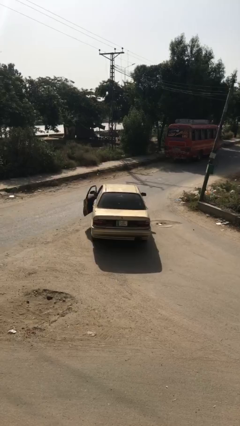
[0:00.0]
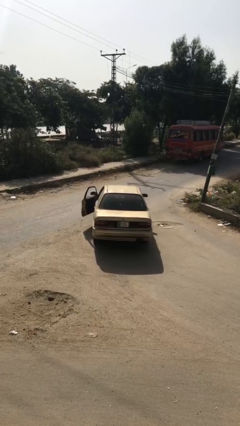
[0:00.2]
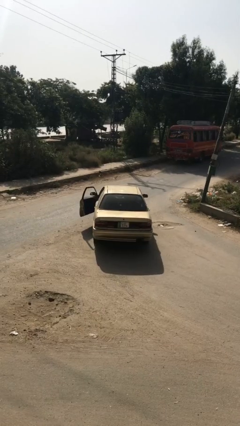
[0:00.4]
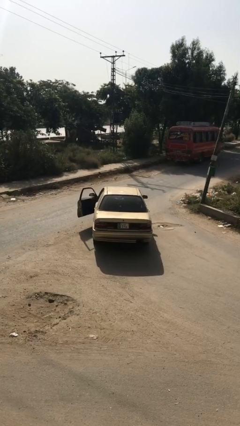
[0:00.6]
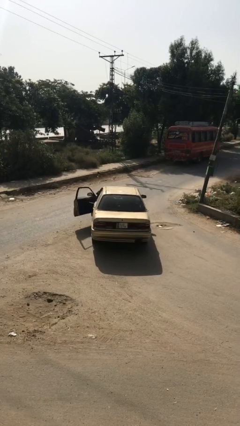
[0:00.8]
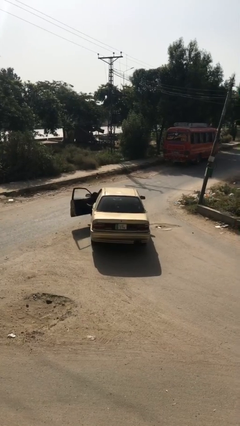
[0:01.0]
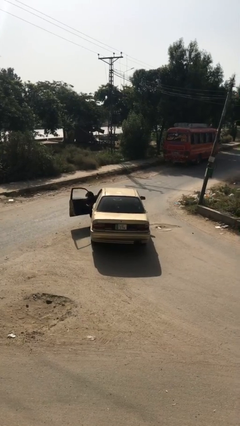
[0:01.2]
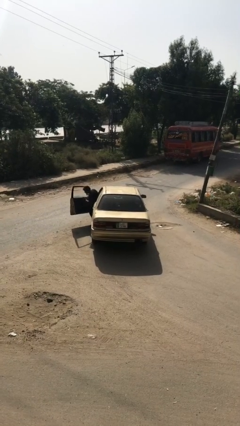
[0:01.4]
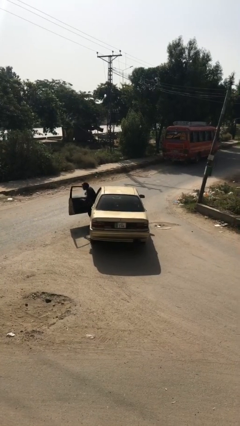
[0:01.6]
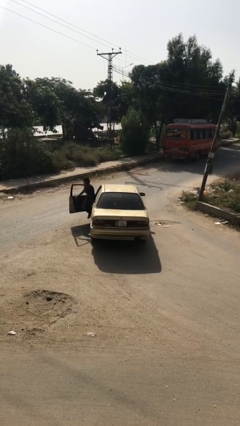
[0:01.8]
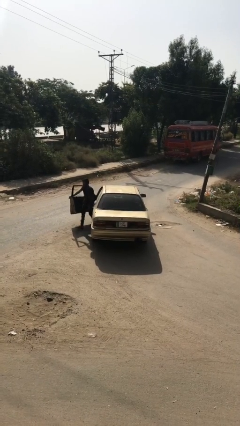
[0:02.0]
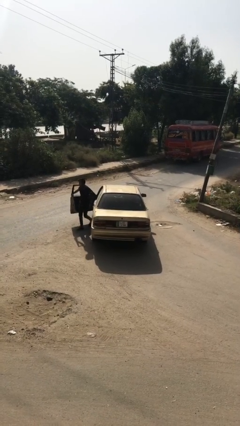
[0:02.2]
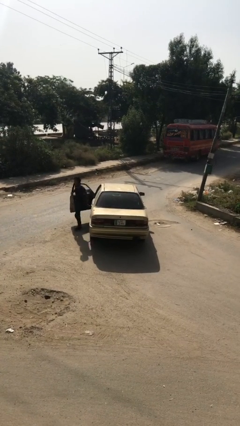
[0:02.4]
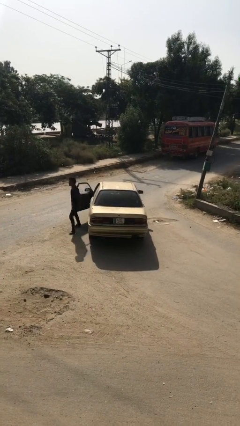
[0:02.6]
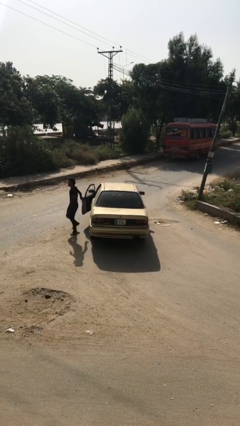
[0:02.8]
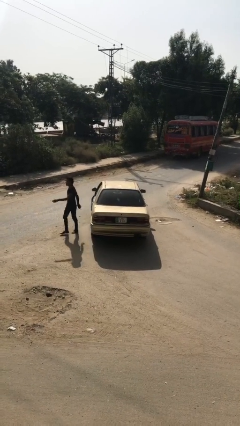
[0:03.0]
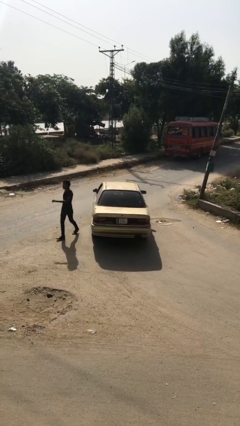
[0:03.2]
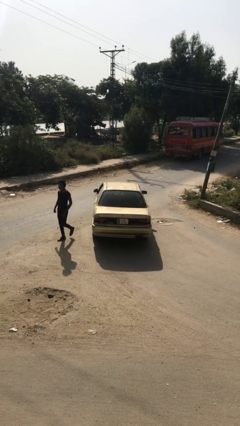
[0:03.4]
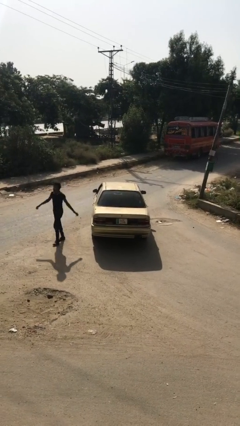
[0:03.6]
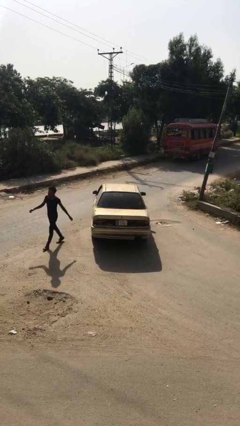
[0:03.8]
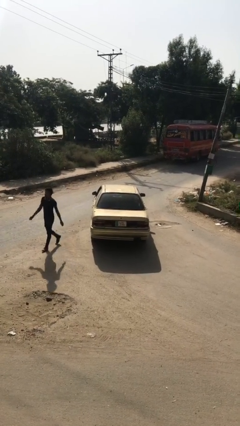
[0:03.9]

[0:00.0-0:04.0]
car drops off person

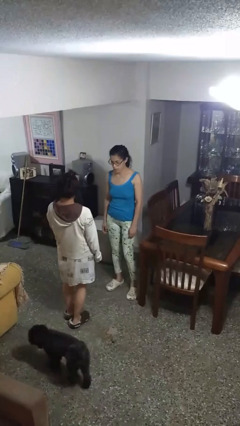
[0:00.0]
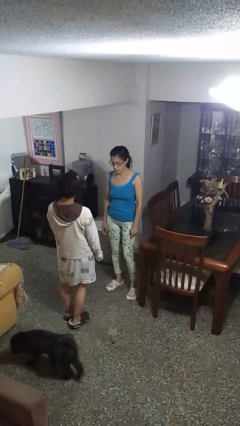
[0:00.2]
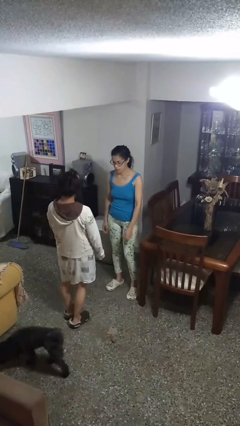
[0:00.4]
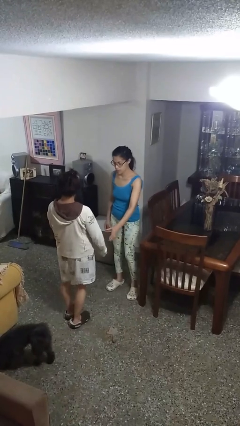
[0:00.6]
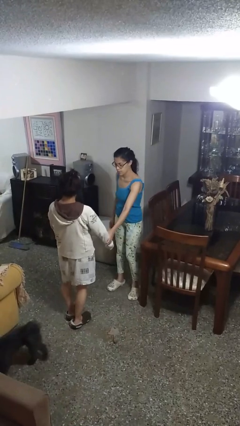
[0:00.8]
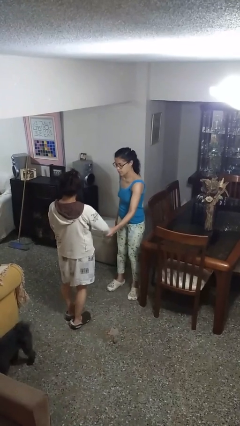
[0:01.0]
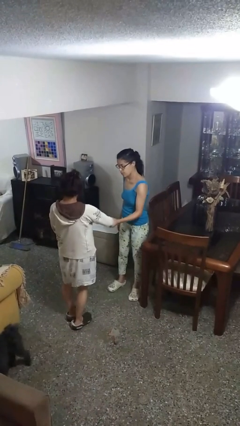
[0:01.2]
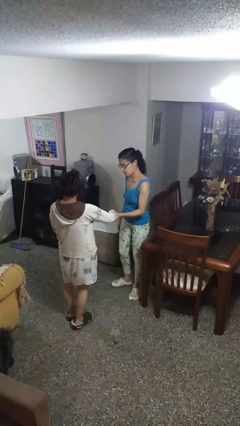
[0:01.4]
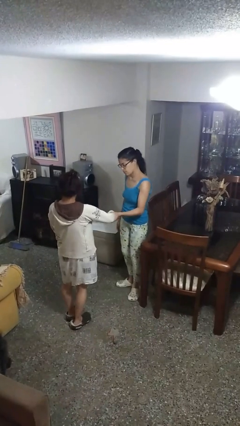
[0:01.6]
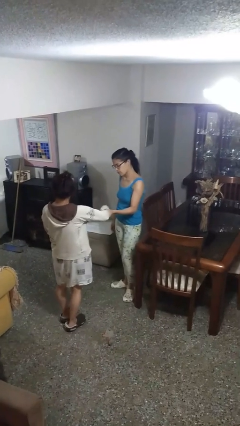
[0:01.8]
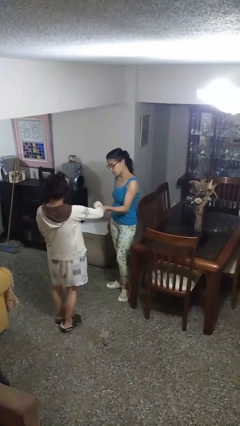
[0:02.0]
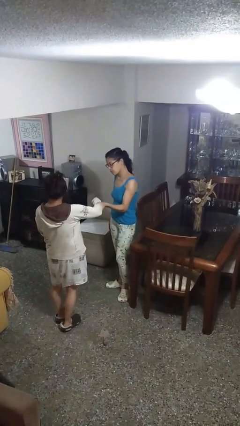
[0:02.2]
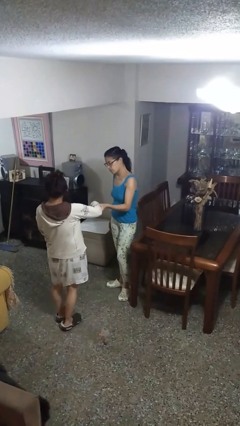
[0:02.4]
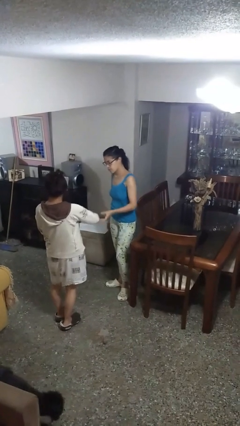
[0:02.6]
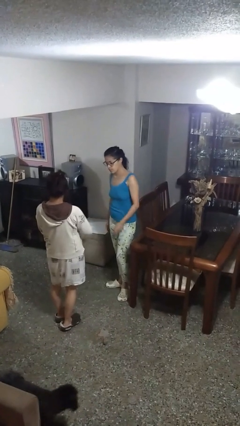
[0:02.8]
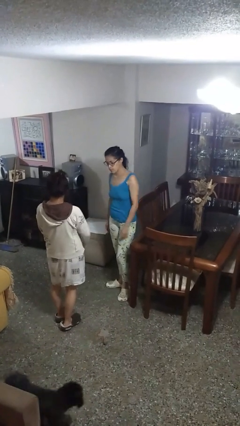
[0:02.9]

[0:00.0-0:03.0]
person grabs person by forearm

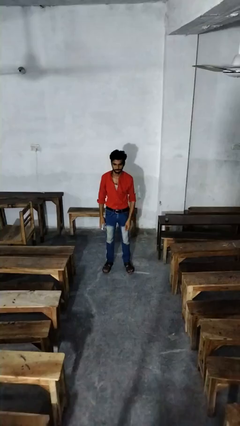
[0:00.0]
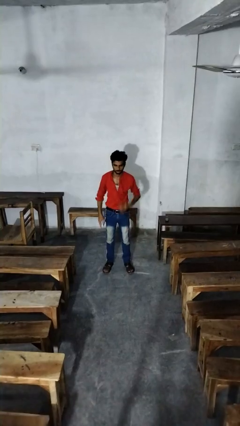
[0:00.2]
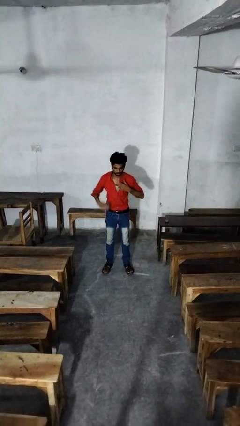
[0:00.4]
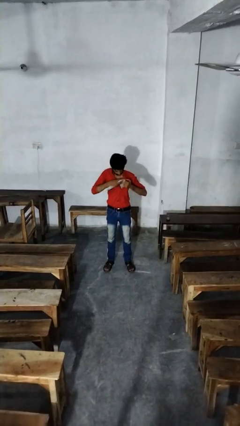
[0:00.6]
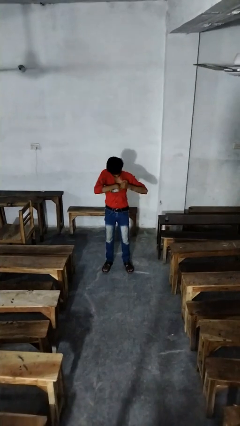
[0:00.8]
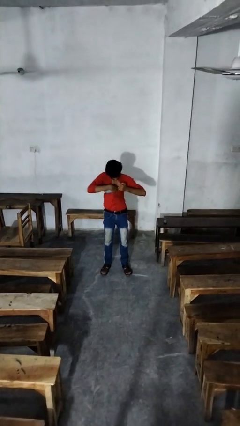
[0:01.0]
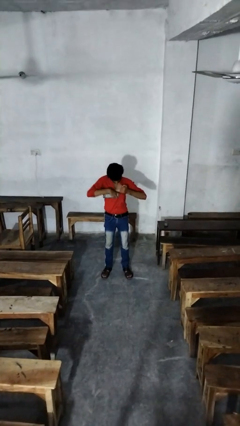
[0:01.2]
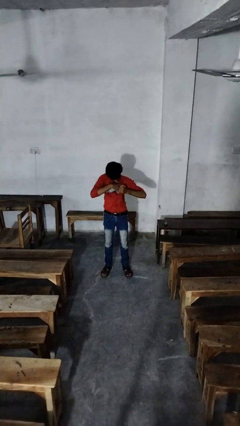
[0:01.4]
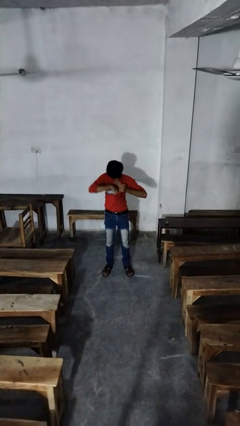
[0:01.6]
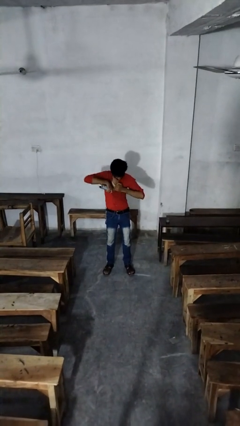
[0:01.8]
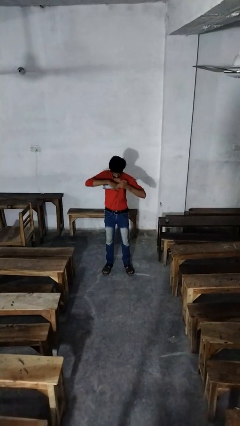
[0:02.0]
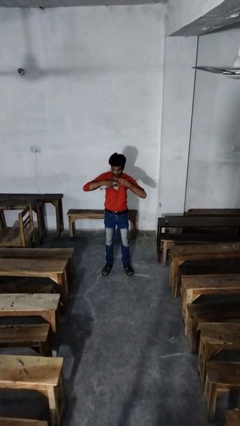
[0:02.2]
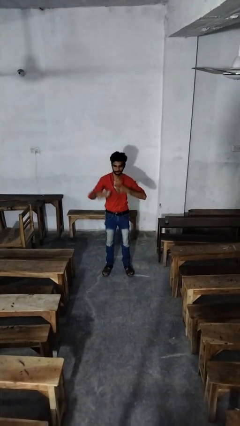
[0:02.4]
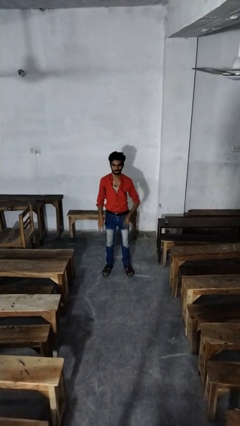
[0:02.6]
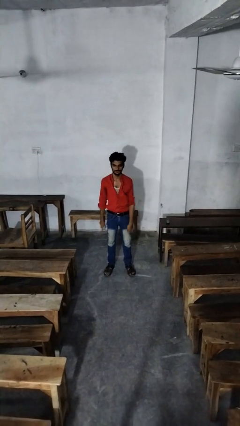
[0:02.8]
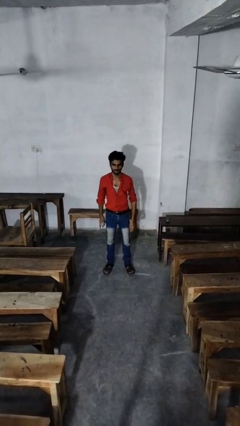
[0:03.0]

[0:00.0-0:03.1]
person applies deodorant

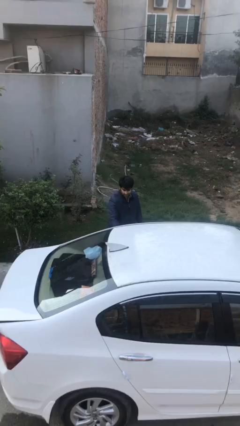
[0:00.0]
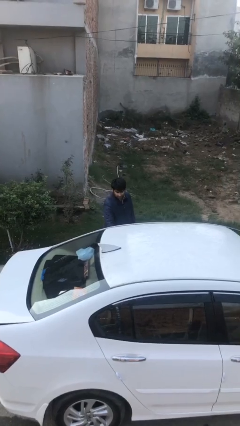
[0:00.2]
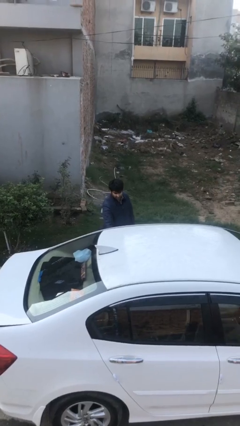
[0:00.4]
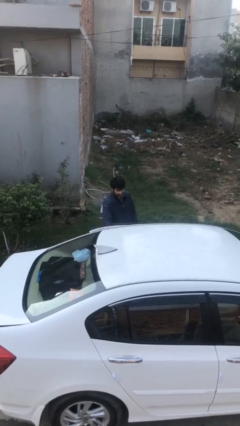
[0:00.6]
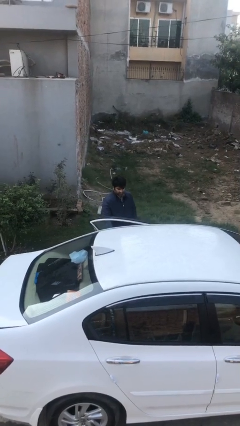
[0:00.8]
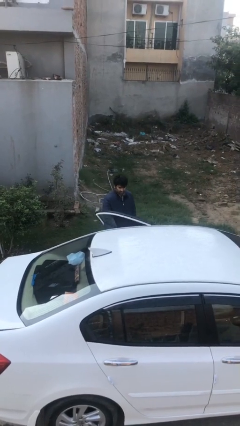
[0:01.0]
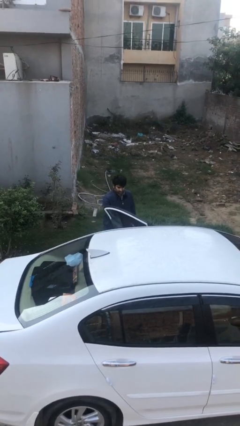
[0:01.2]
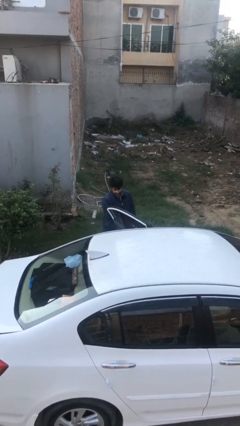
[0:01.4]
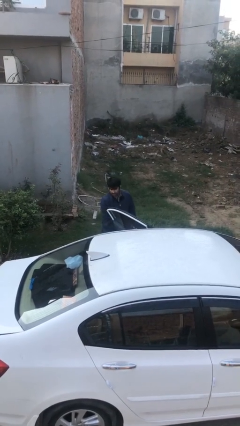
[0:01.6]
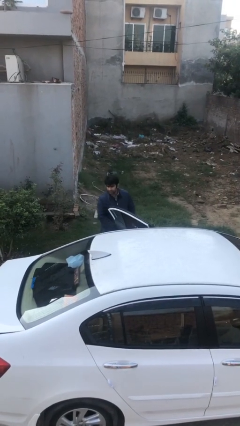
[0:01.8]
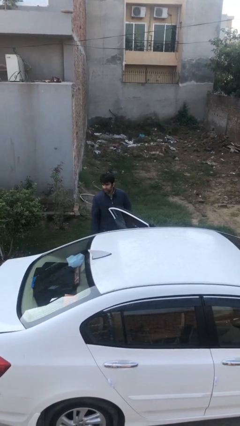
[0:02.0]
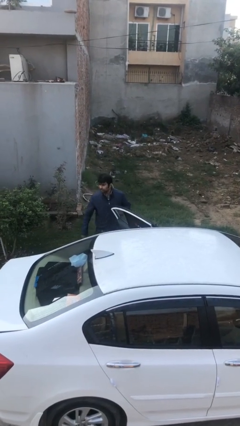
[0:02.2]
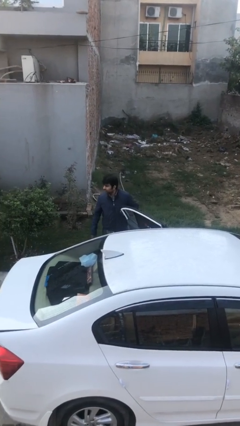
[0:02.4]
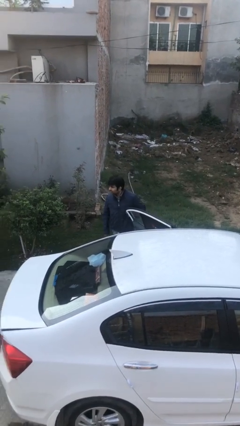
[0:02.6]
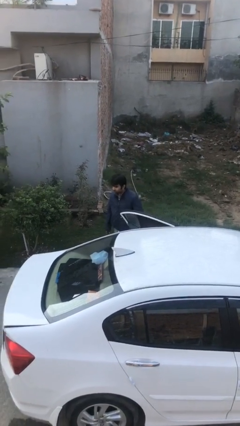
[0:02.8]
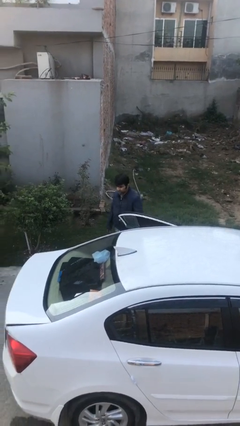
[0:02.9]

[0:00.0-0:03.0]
person opens car door

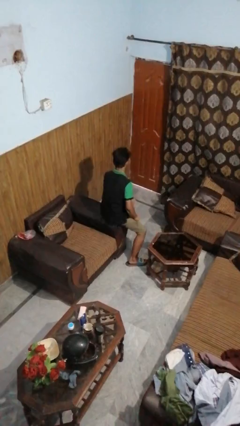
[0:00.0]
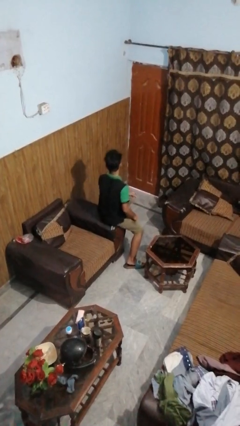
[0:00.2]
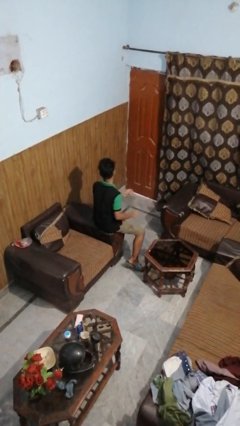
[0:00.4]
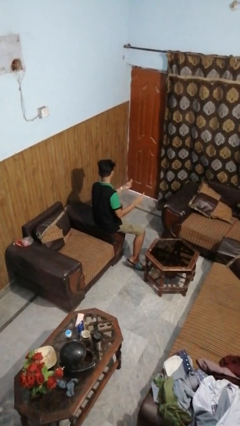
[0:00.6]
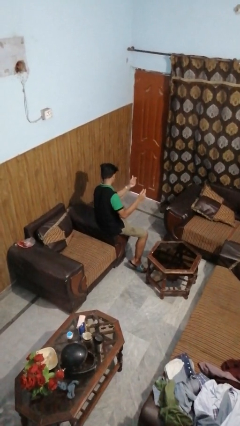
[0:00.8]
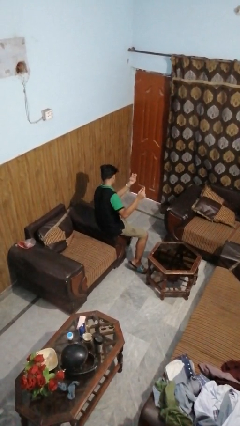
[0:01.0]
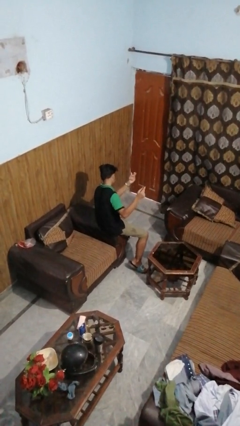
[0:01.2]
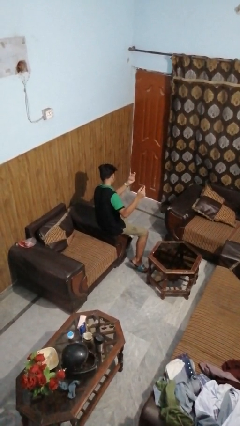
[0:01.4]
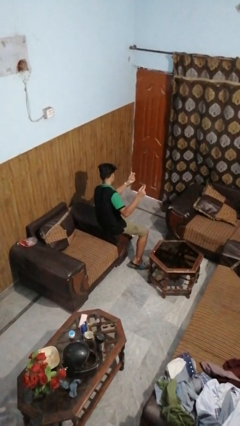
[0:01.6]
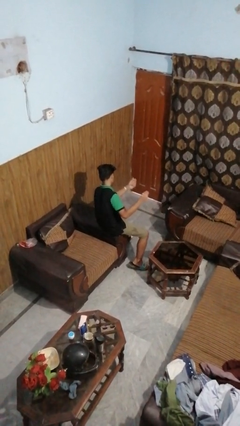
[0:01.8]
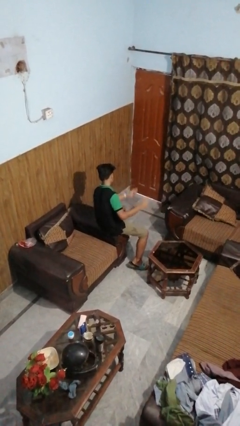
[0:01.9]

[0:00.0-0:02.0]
person snaps fingers

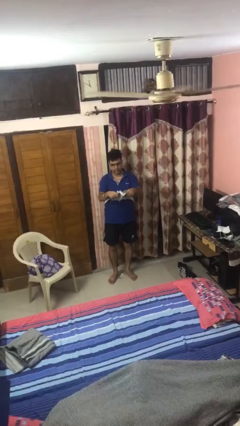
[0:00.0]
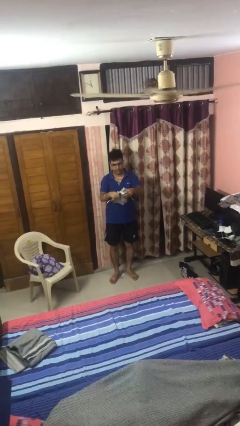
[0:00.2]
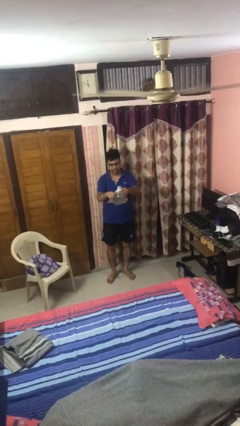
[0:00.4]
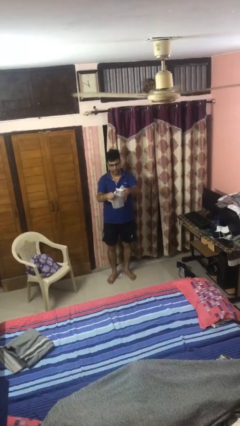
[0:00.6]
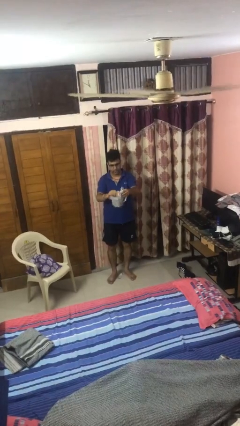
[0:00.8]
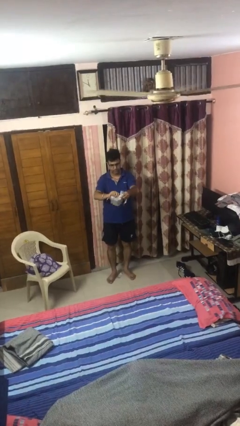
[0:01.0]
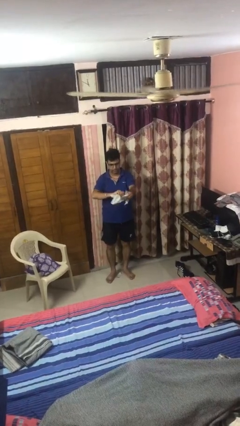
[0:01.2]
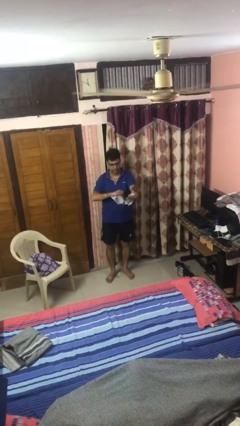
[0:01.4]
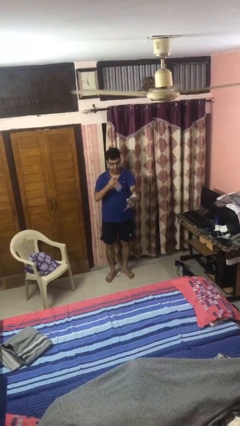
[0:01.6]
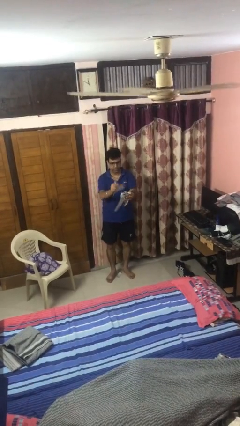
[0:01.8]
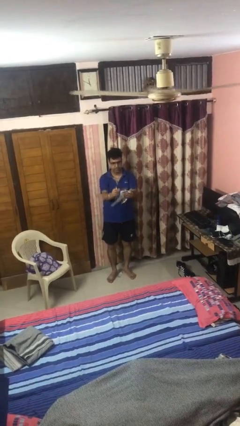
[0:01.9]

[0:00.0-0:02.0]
person tears paper

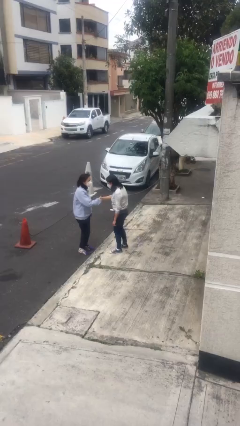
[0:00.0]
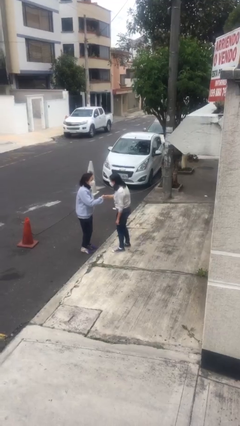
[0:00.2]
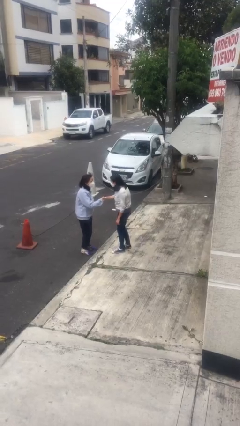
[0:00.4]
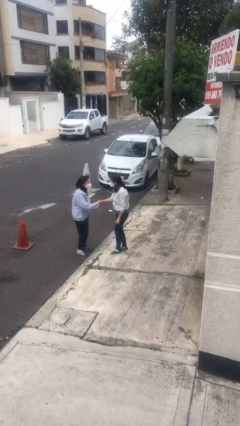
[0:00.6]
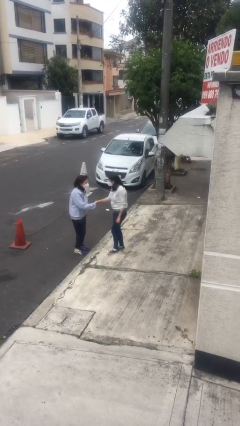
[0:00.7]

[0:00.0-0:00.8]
person shakes hand
